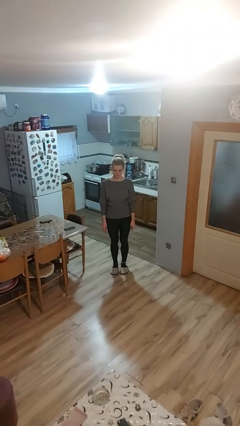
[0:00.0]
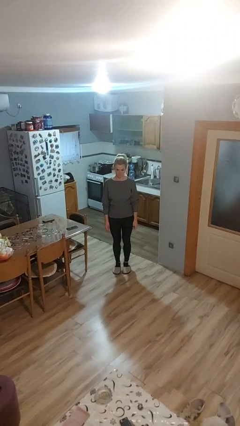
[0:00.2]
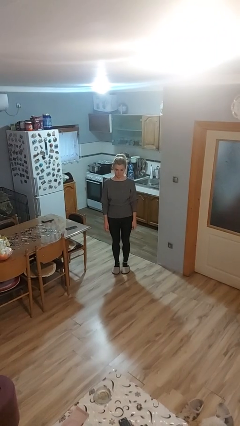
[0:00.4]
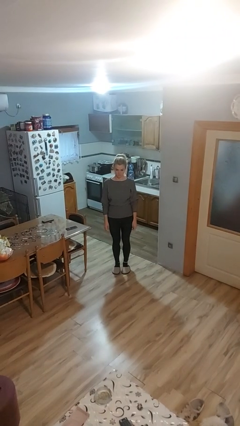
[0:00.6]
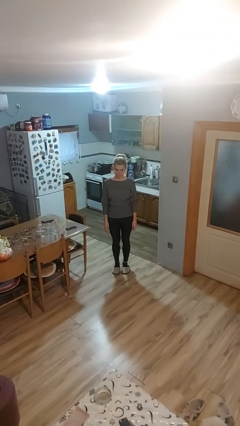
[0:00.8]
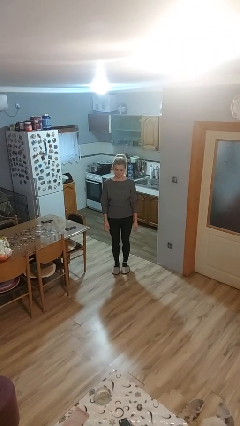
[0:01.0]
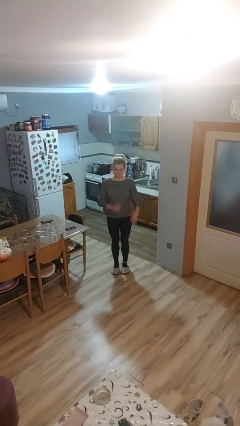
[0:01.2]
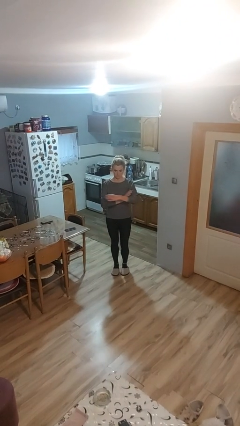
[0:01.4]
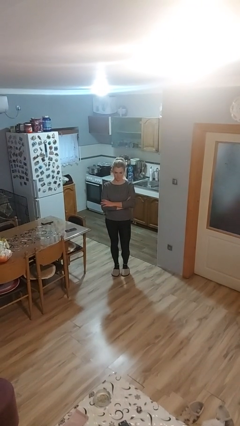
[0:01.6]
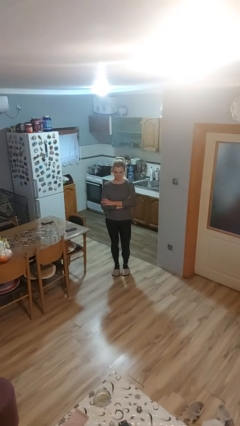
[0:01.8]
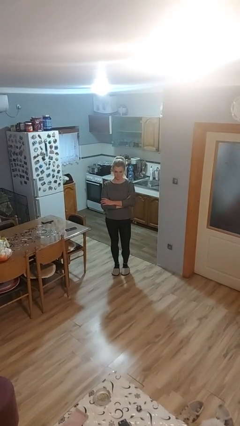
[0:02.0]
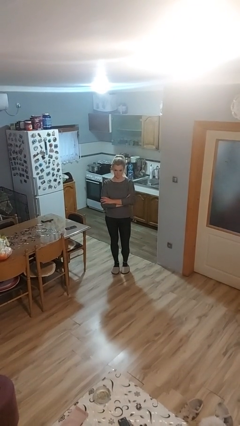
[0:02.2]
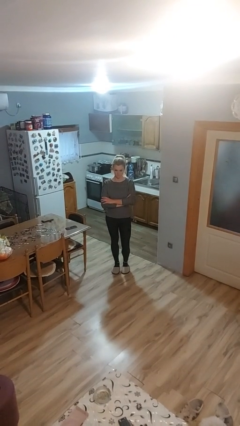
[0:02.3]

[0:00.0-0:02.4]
person crosses arms

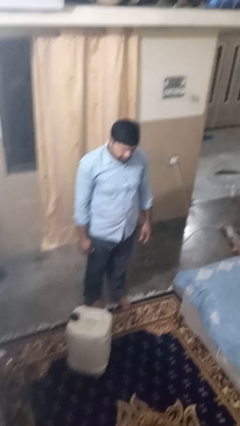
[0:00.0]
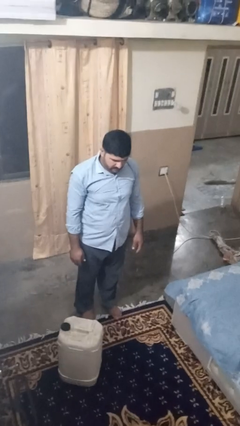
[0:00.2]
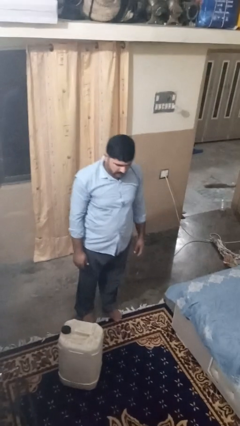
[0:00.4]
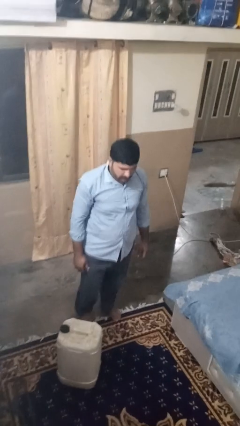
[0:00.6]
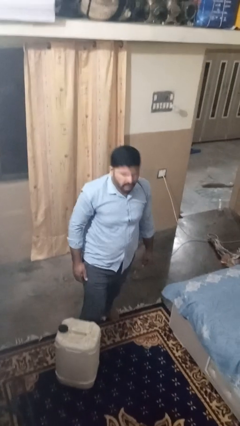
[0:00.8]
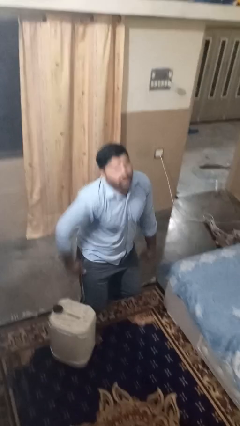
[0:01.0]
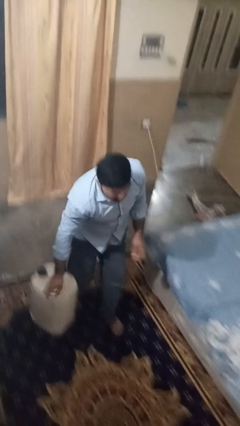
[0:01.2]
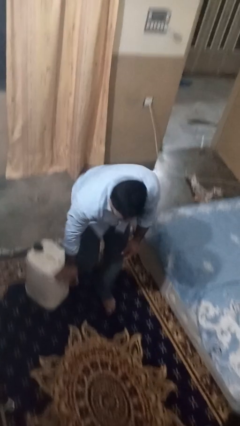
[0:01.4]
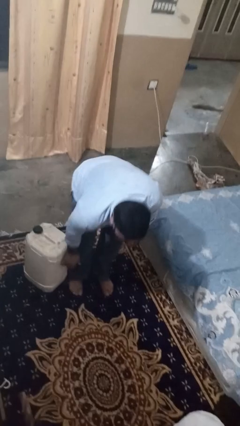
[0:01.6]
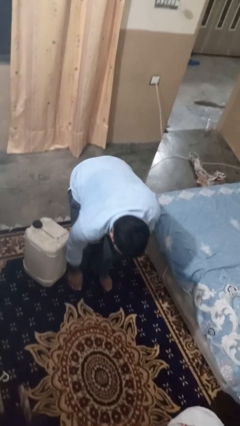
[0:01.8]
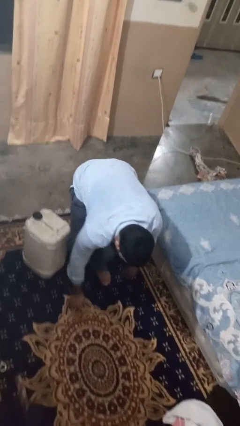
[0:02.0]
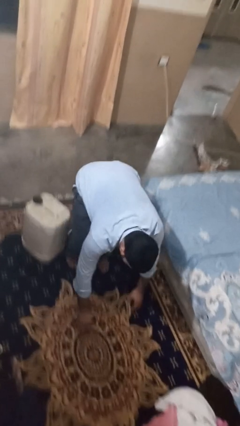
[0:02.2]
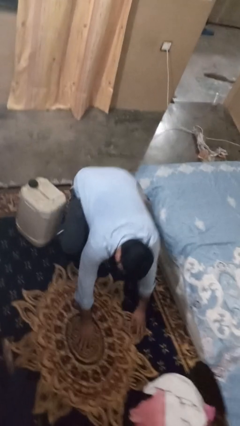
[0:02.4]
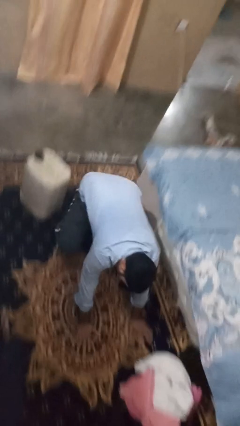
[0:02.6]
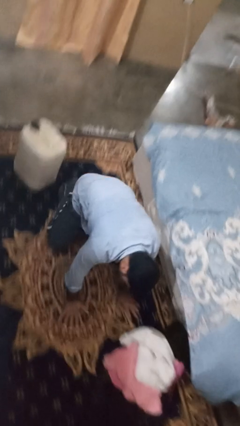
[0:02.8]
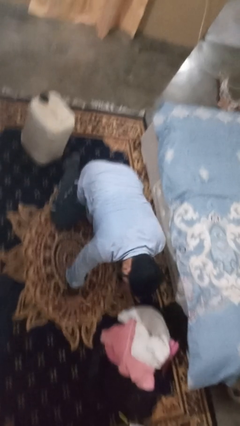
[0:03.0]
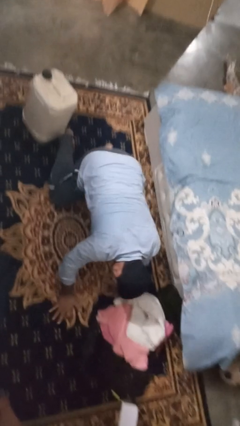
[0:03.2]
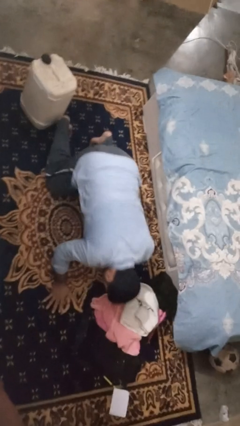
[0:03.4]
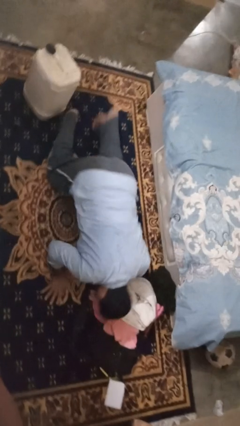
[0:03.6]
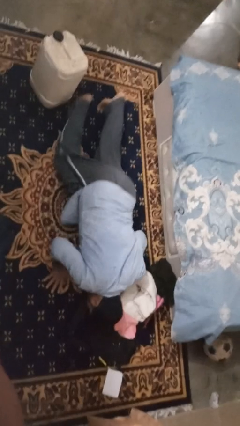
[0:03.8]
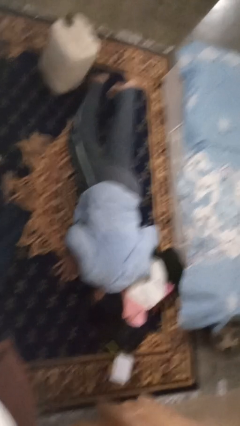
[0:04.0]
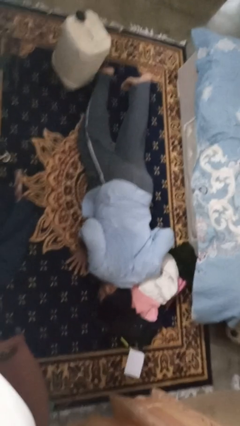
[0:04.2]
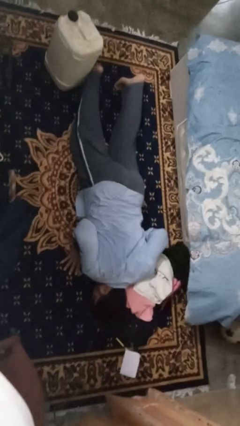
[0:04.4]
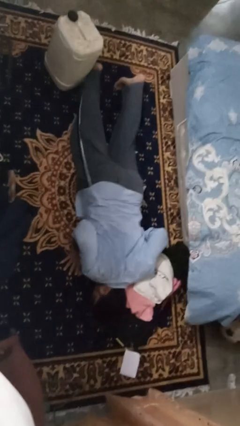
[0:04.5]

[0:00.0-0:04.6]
person trips on object on floor

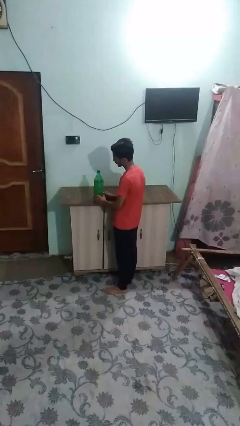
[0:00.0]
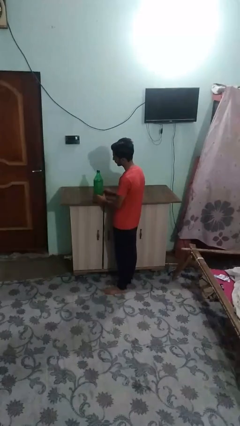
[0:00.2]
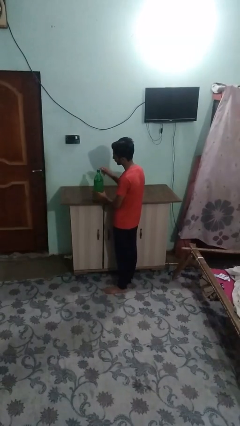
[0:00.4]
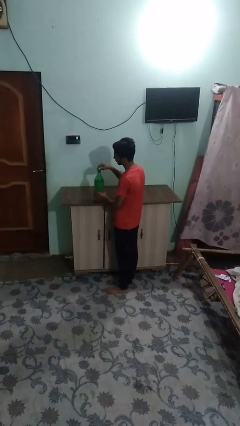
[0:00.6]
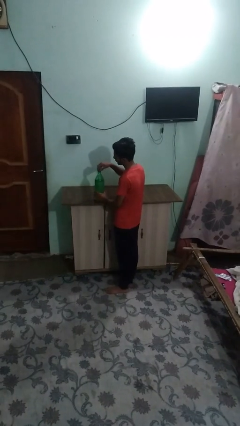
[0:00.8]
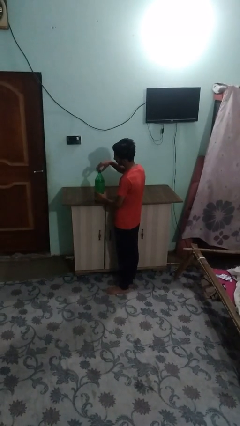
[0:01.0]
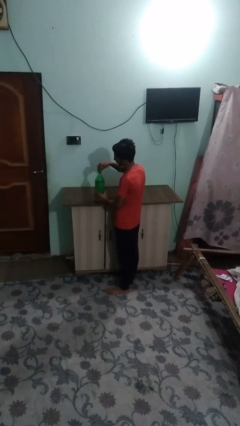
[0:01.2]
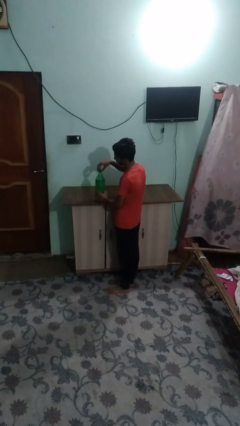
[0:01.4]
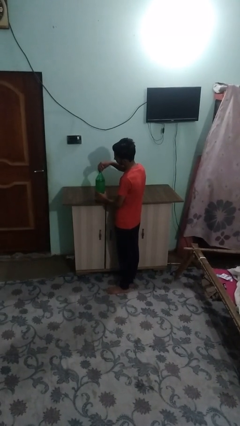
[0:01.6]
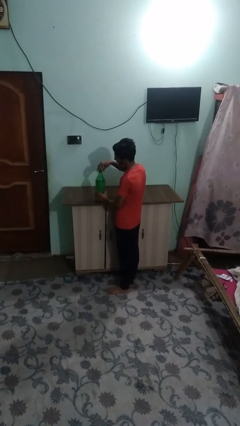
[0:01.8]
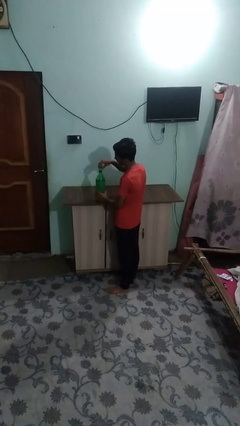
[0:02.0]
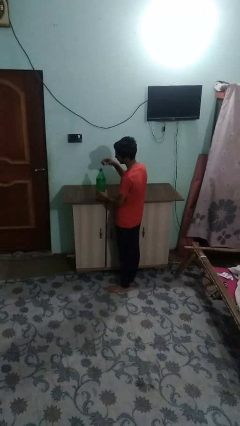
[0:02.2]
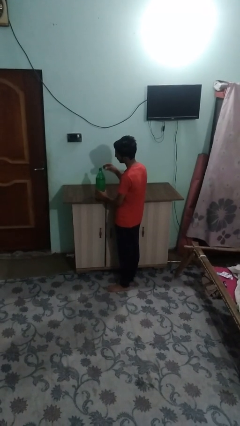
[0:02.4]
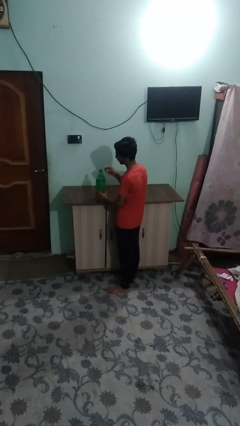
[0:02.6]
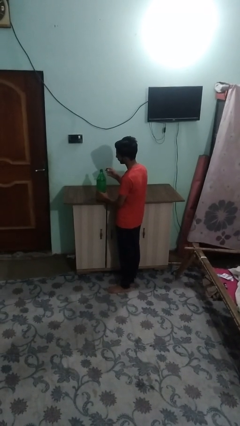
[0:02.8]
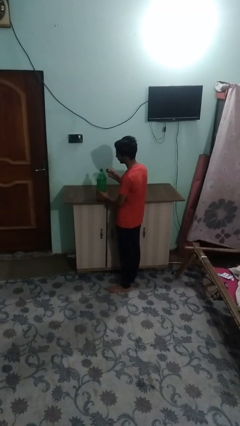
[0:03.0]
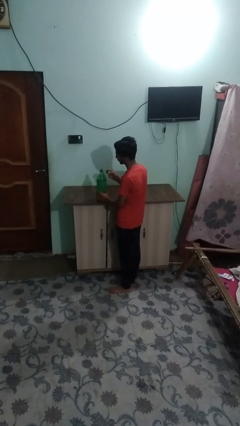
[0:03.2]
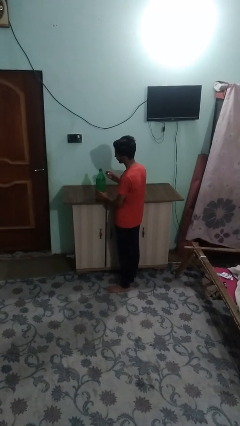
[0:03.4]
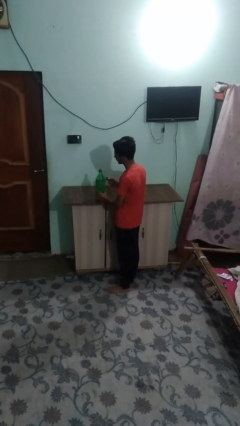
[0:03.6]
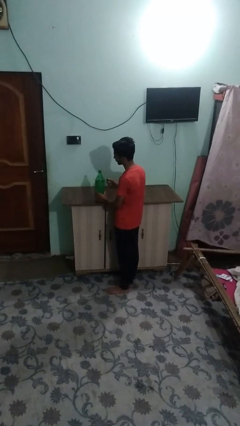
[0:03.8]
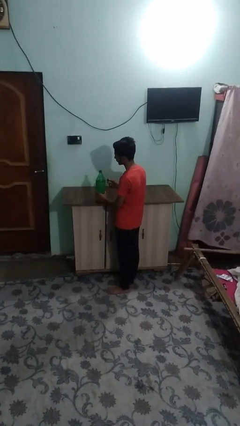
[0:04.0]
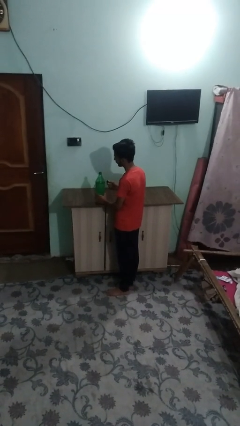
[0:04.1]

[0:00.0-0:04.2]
person unscrews lid from bottle

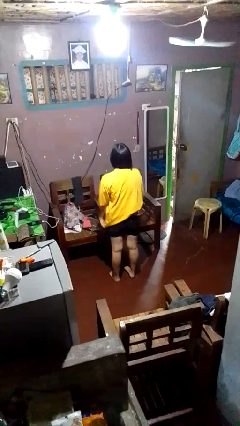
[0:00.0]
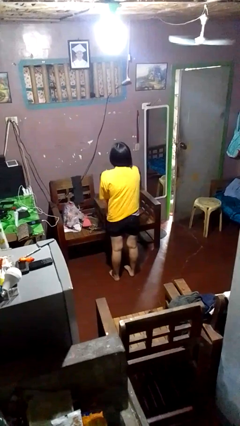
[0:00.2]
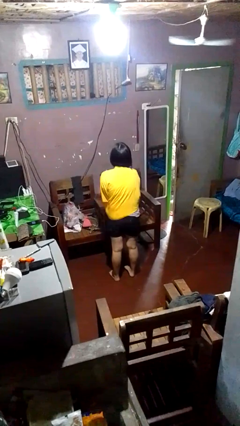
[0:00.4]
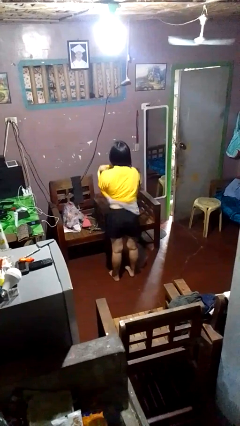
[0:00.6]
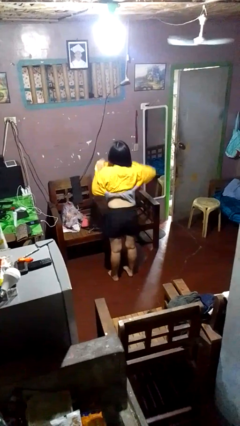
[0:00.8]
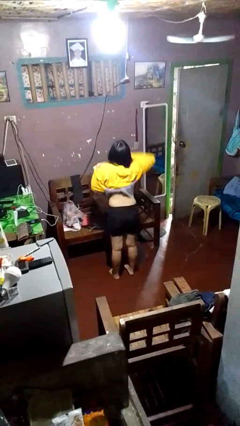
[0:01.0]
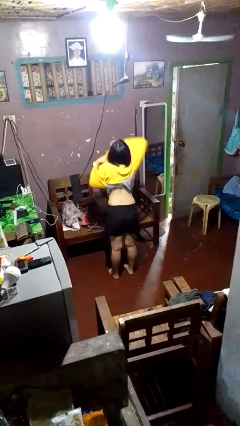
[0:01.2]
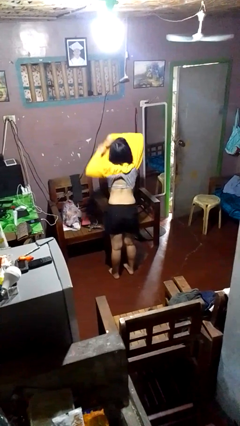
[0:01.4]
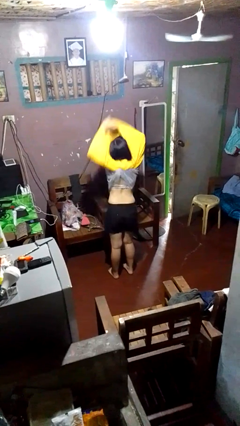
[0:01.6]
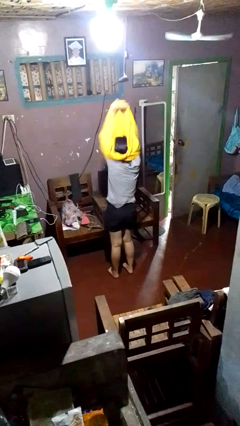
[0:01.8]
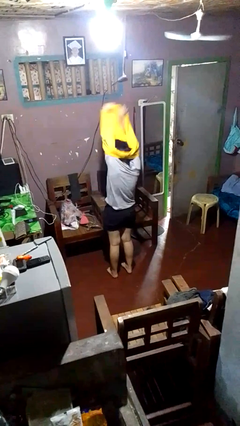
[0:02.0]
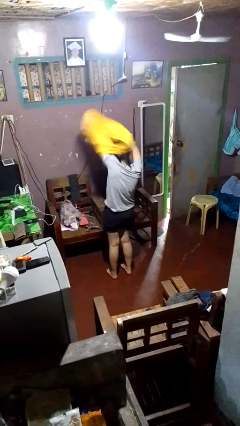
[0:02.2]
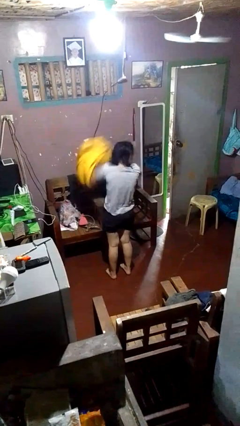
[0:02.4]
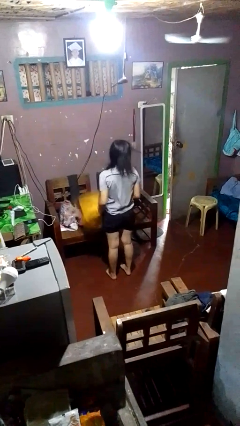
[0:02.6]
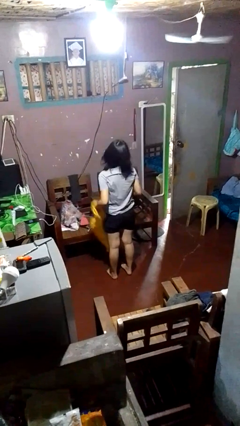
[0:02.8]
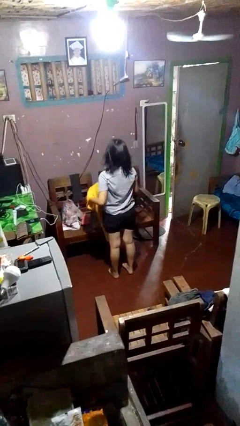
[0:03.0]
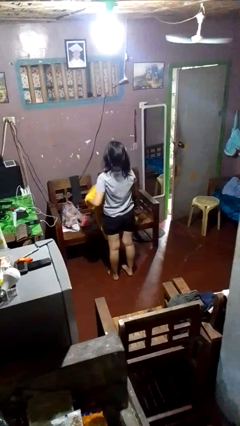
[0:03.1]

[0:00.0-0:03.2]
person takes off shirt

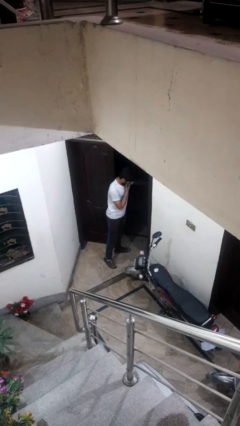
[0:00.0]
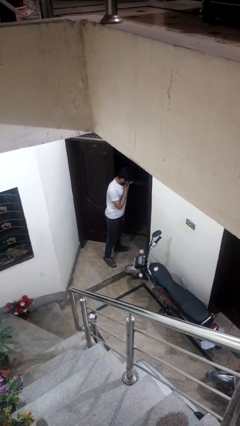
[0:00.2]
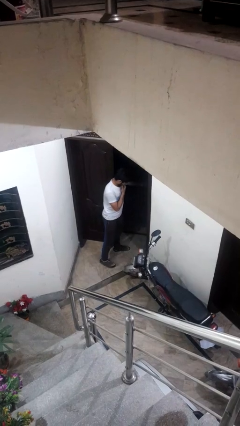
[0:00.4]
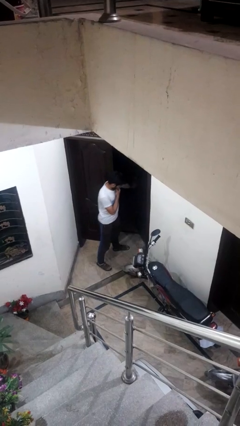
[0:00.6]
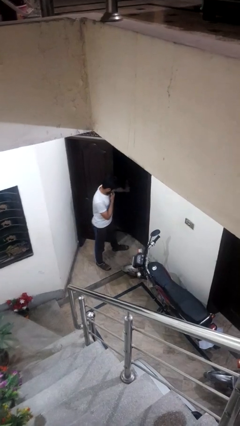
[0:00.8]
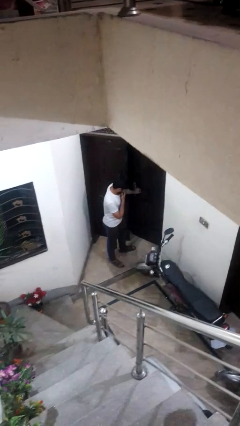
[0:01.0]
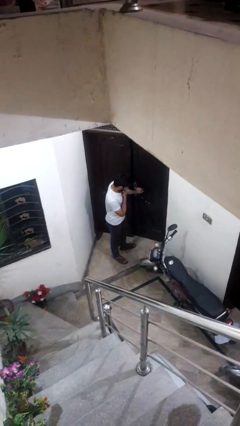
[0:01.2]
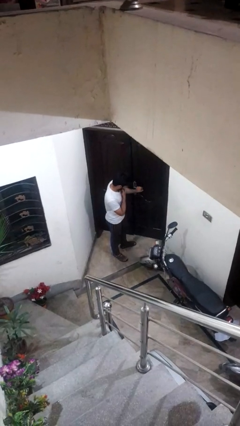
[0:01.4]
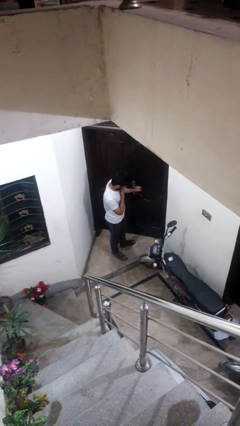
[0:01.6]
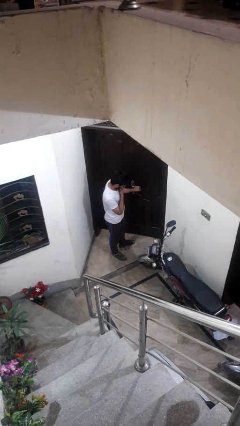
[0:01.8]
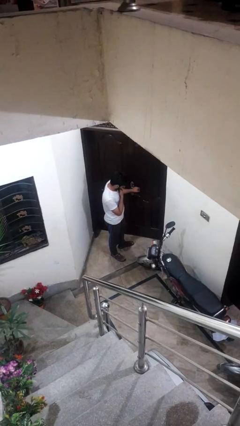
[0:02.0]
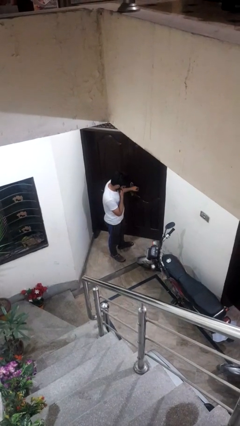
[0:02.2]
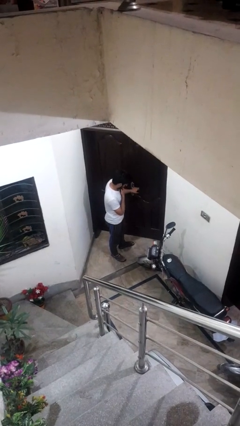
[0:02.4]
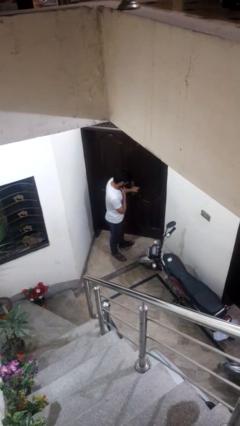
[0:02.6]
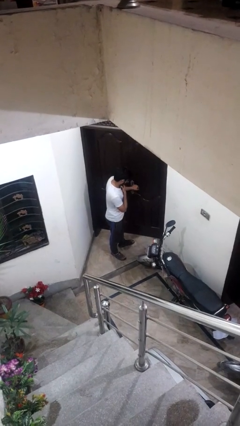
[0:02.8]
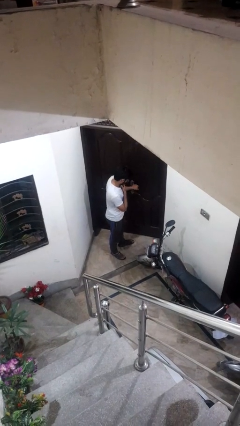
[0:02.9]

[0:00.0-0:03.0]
person closes facility door

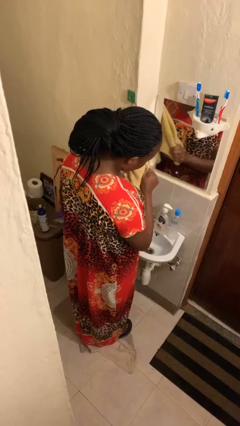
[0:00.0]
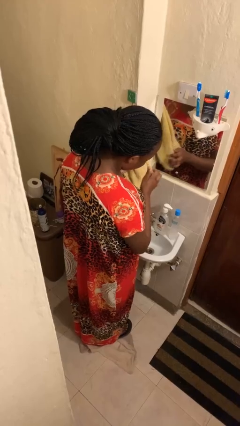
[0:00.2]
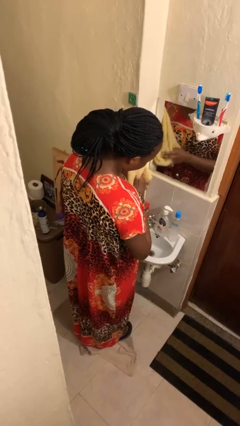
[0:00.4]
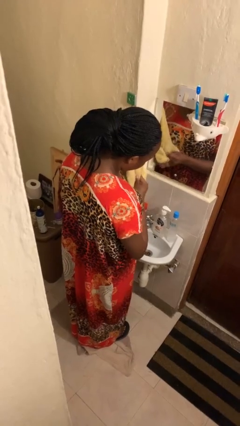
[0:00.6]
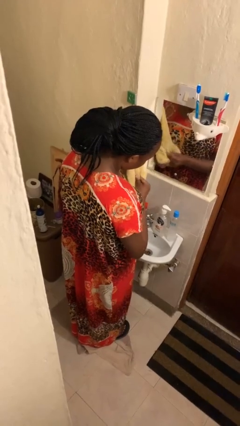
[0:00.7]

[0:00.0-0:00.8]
person dries hands with towel
